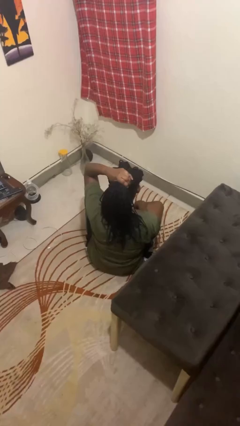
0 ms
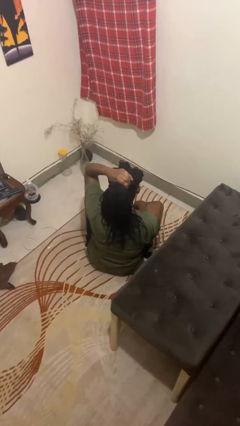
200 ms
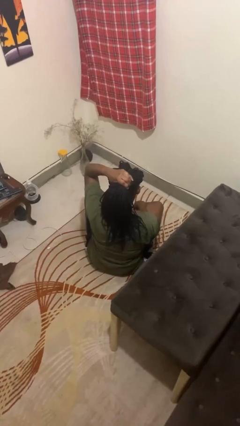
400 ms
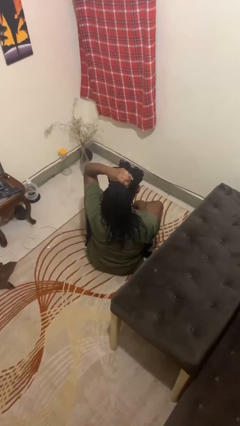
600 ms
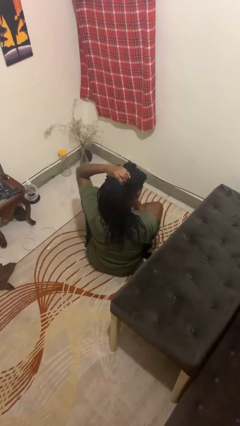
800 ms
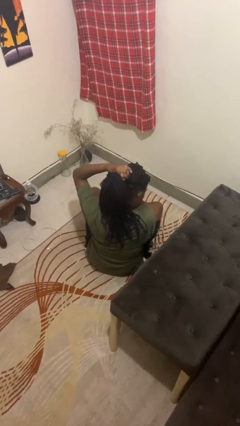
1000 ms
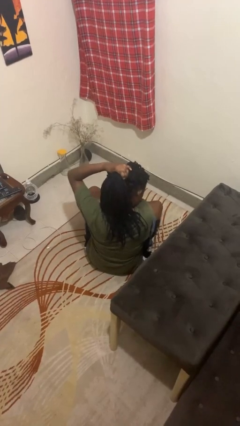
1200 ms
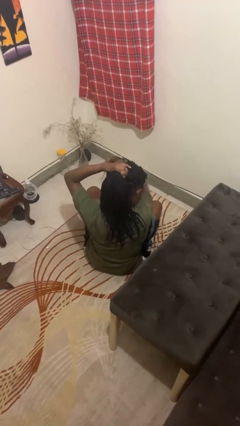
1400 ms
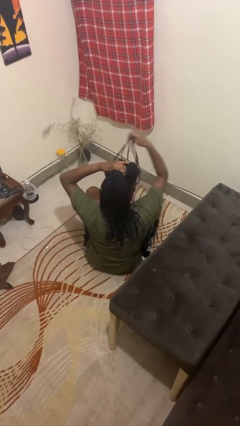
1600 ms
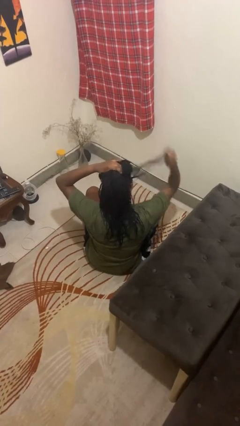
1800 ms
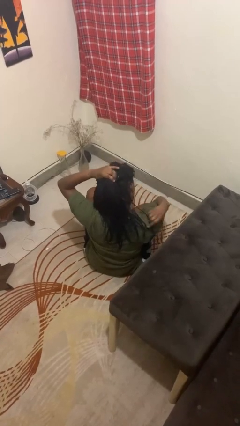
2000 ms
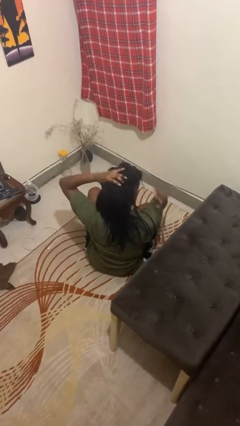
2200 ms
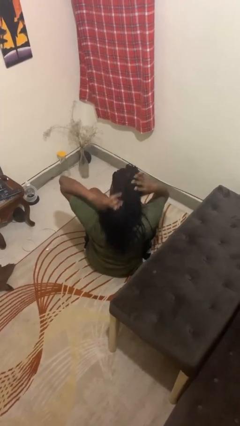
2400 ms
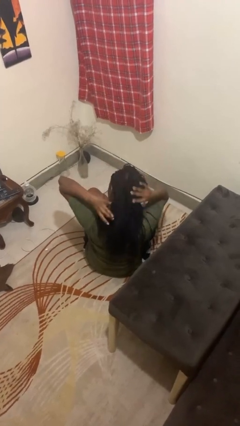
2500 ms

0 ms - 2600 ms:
person takes off hairtie

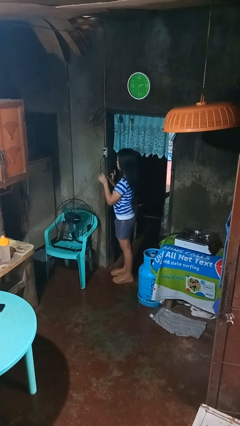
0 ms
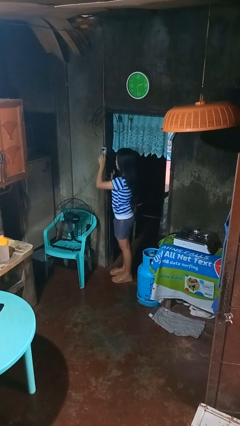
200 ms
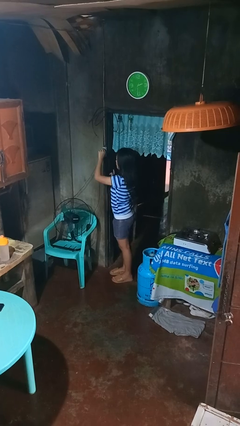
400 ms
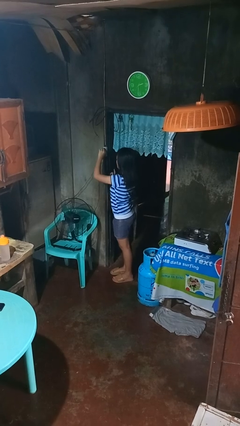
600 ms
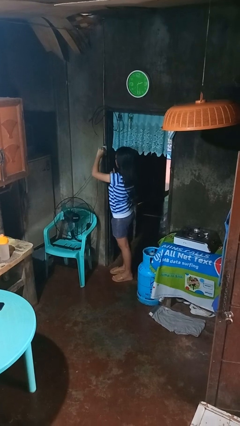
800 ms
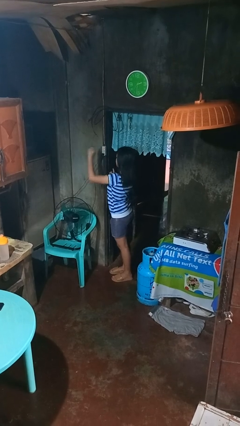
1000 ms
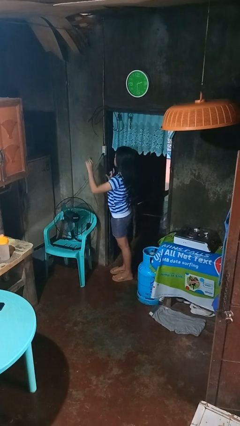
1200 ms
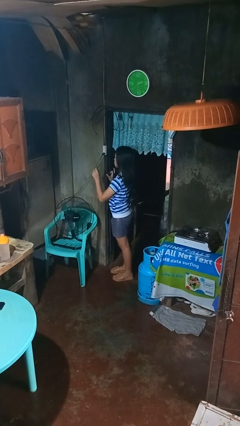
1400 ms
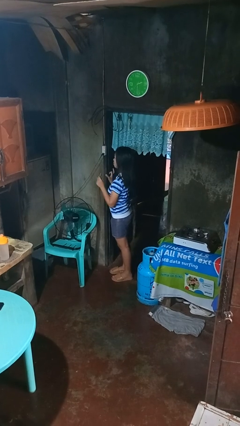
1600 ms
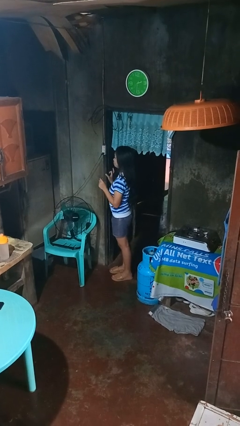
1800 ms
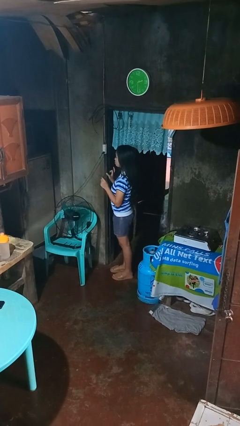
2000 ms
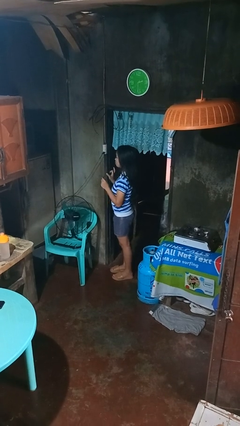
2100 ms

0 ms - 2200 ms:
person unplugs from electrical socket

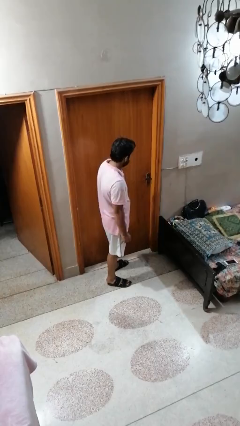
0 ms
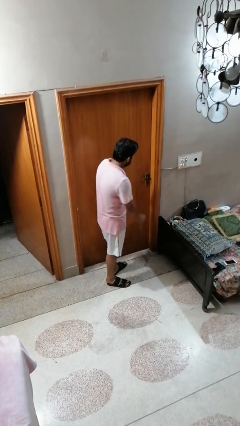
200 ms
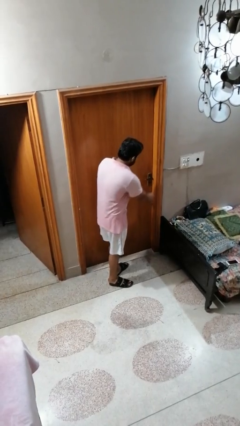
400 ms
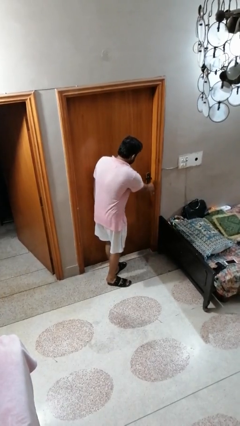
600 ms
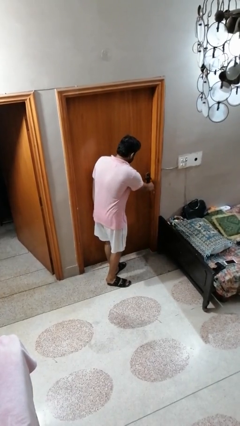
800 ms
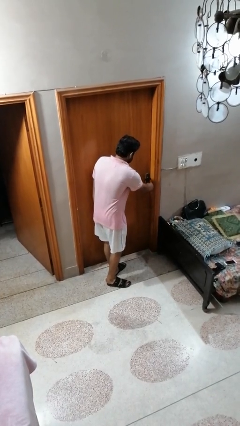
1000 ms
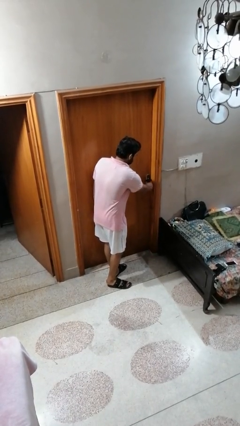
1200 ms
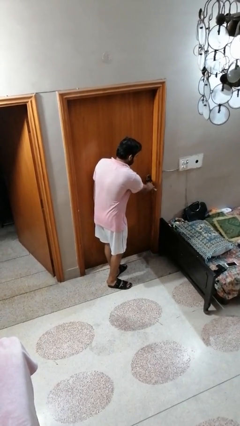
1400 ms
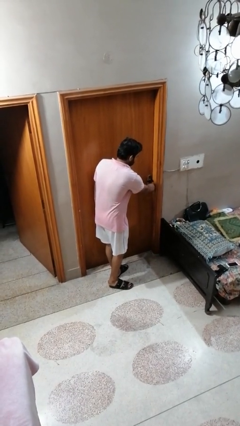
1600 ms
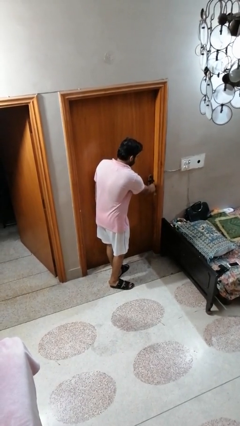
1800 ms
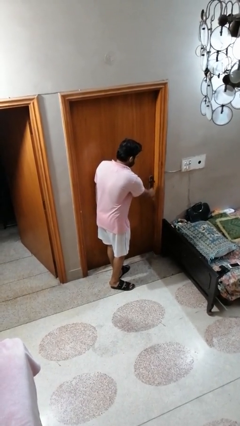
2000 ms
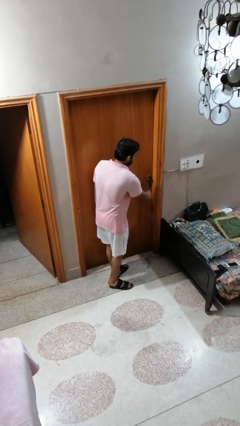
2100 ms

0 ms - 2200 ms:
person locks door with keys

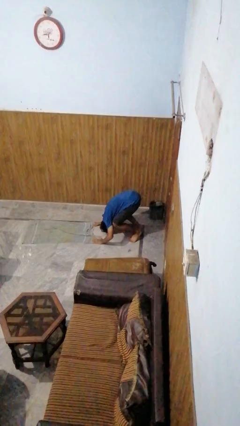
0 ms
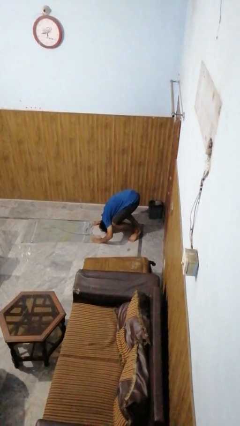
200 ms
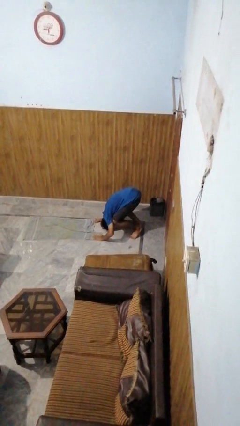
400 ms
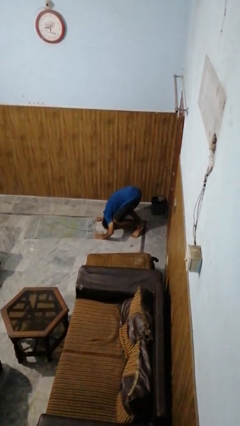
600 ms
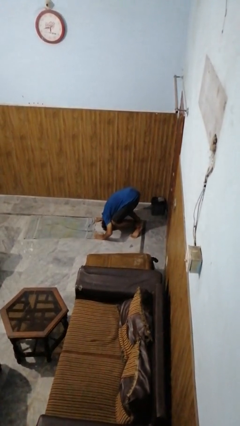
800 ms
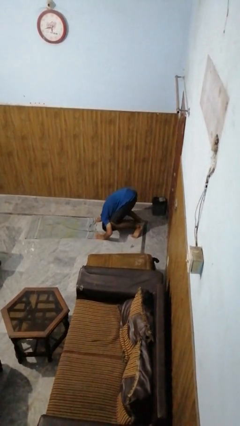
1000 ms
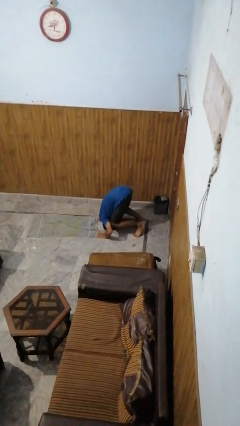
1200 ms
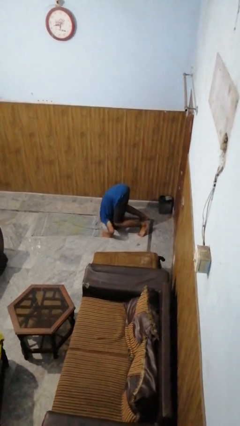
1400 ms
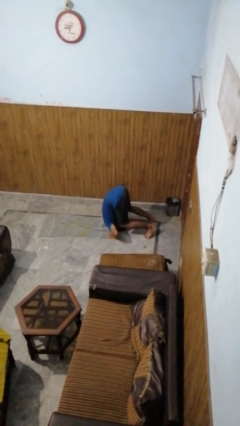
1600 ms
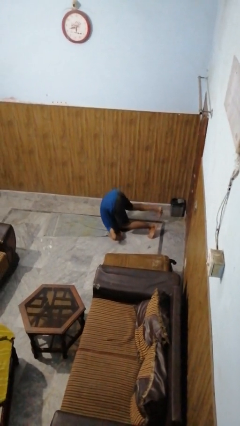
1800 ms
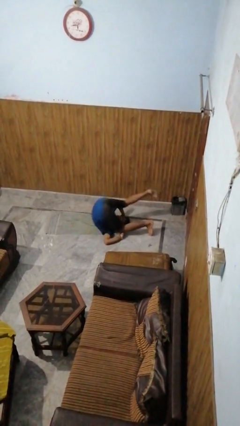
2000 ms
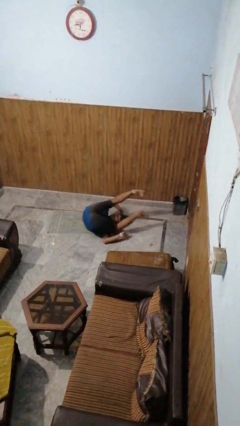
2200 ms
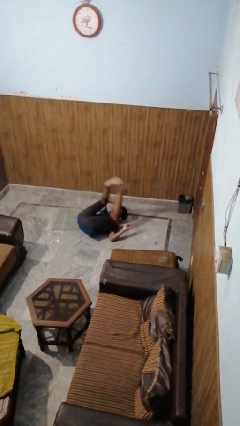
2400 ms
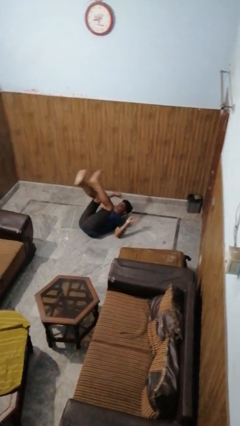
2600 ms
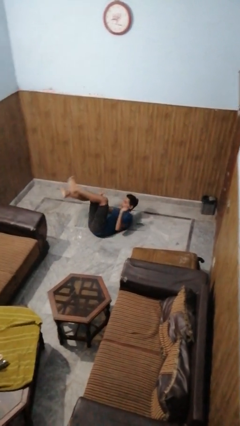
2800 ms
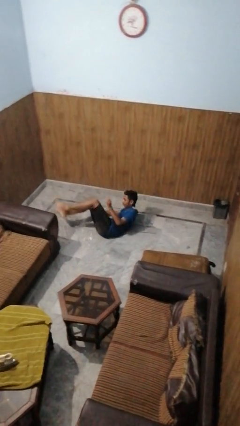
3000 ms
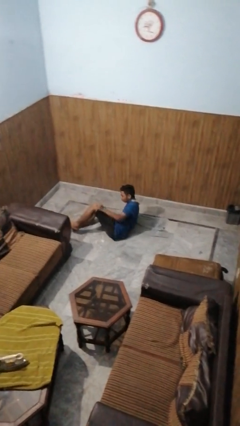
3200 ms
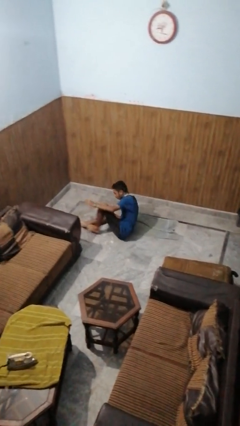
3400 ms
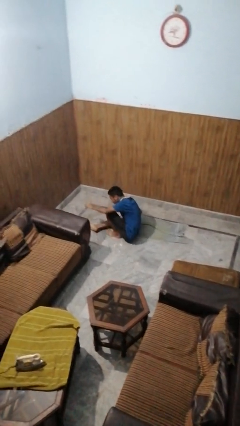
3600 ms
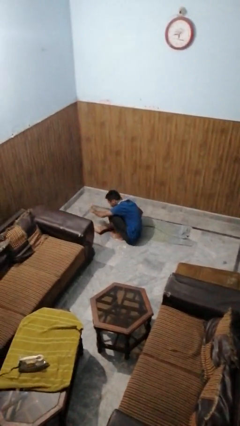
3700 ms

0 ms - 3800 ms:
person somersaults

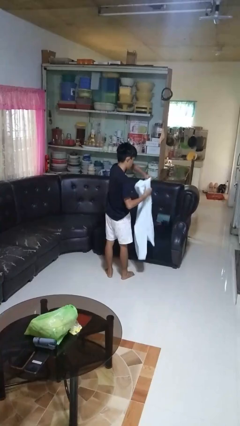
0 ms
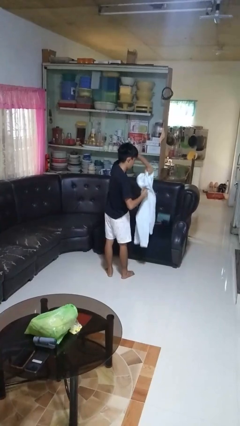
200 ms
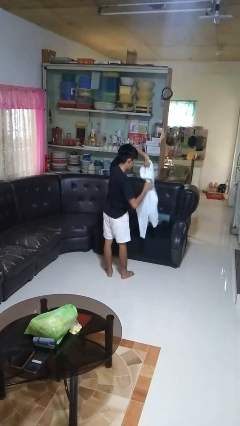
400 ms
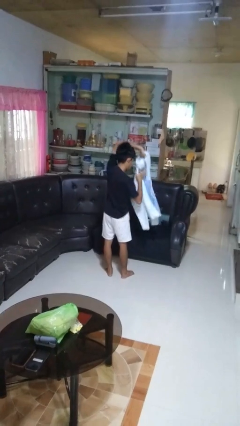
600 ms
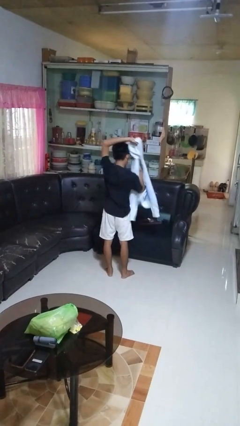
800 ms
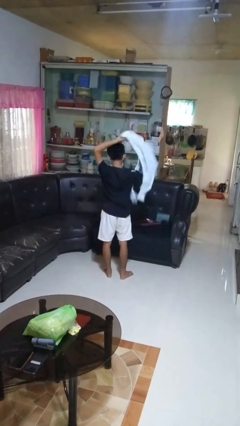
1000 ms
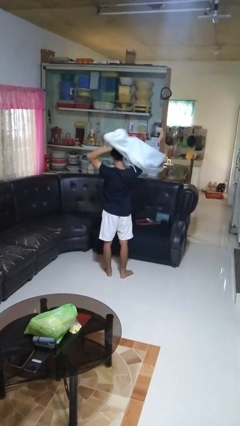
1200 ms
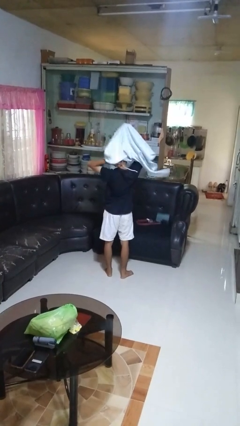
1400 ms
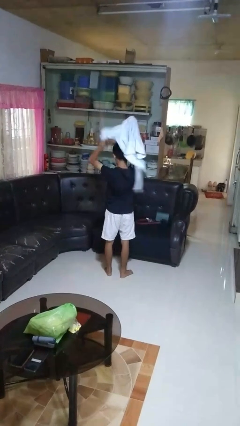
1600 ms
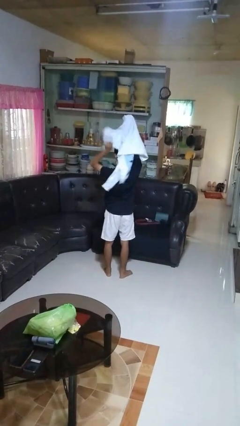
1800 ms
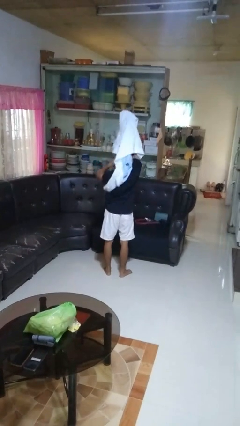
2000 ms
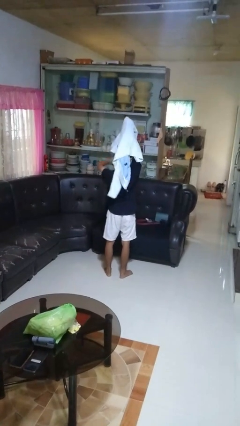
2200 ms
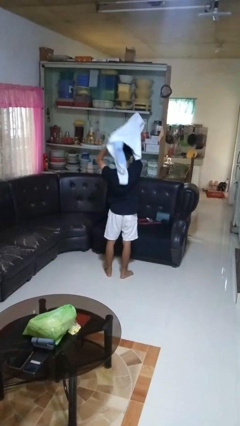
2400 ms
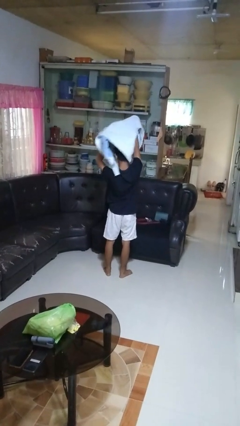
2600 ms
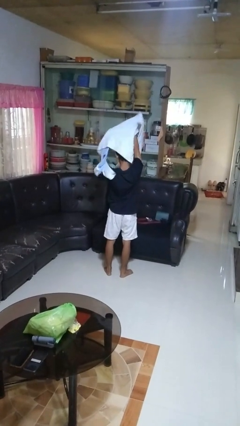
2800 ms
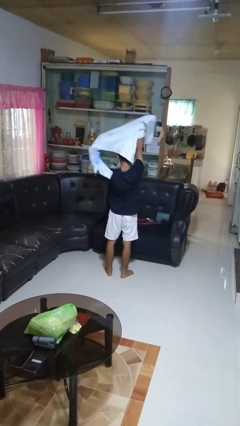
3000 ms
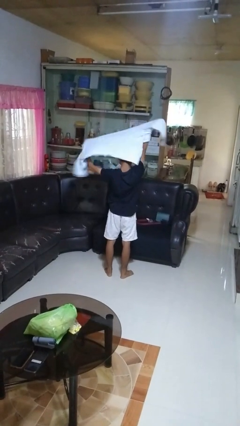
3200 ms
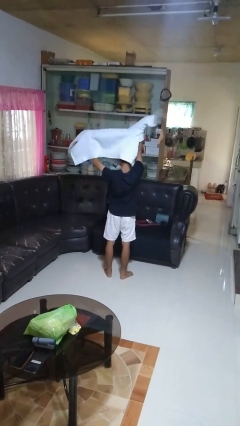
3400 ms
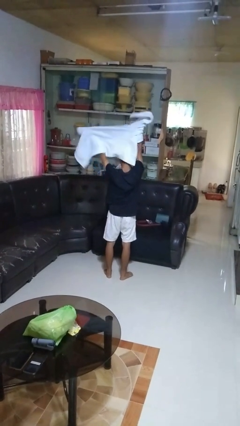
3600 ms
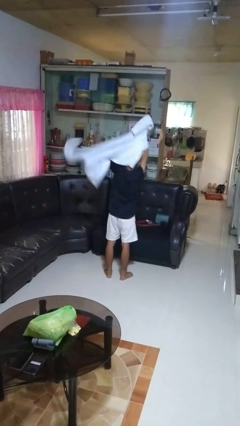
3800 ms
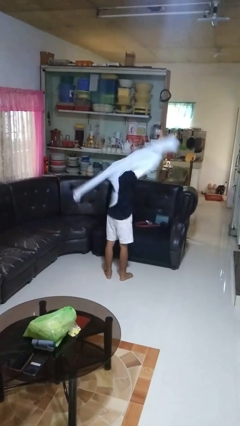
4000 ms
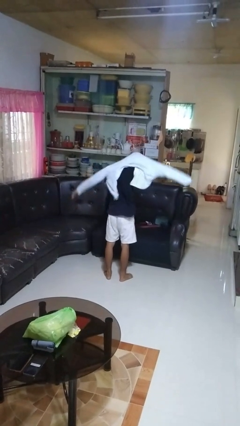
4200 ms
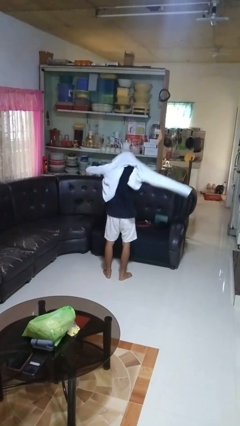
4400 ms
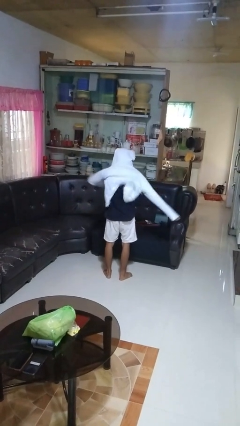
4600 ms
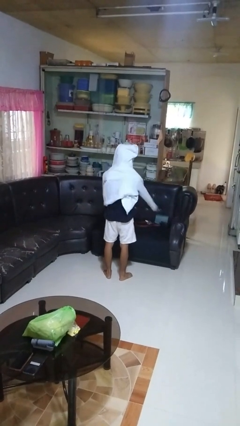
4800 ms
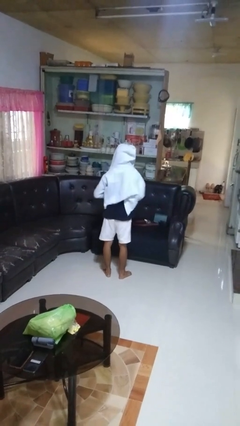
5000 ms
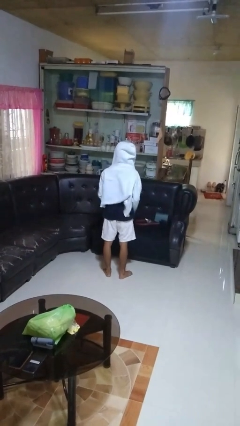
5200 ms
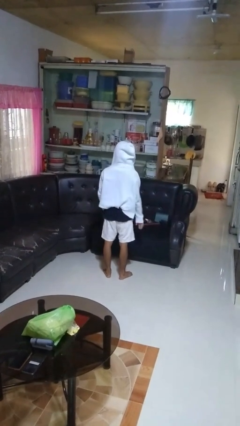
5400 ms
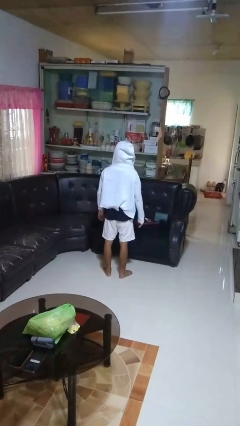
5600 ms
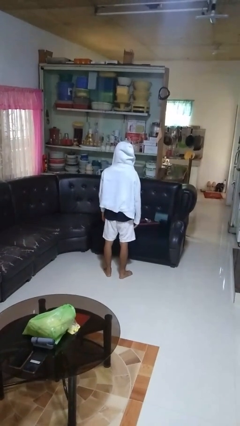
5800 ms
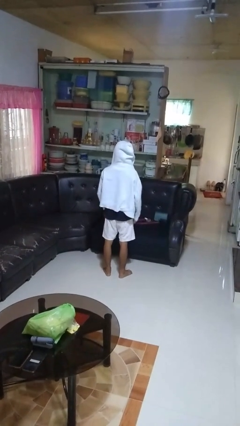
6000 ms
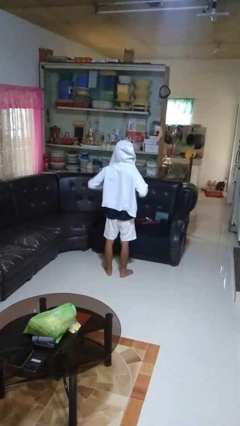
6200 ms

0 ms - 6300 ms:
person puts on hoodie

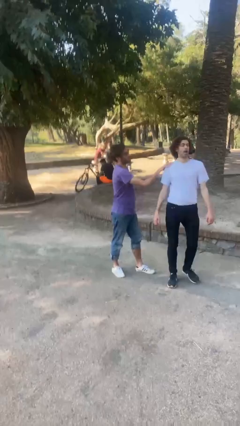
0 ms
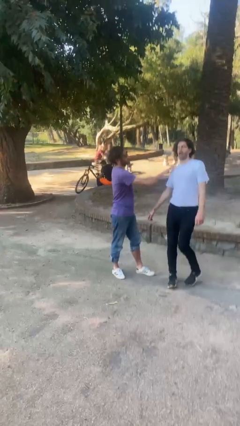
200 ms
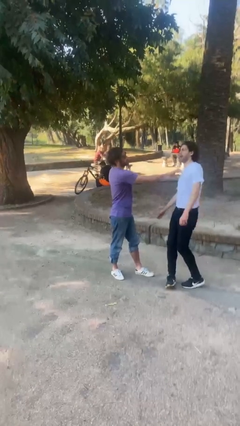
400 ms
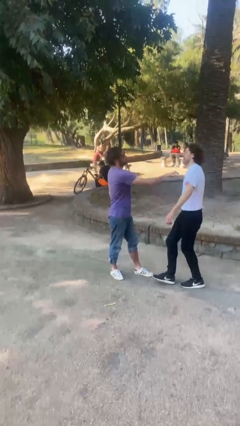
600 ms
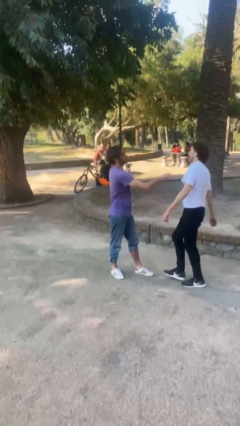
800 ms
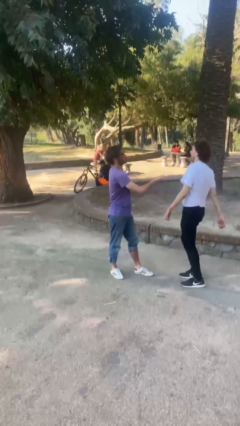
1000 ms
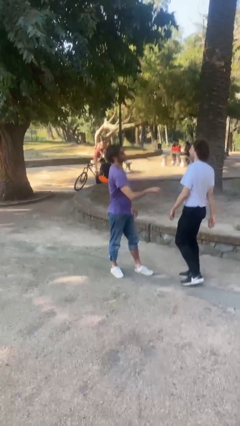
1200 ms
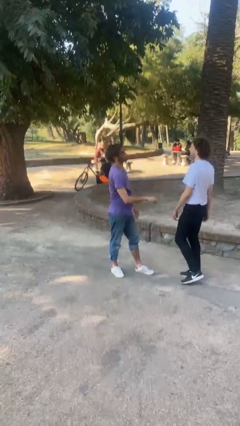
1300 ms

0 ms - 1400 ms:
person spins person around
